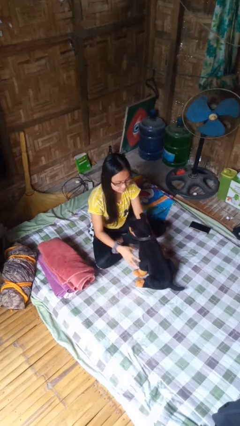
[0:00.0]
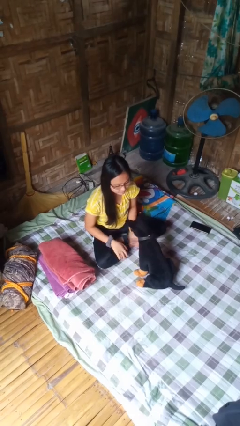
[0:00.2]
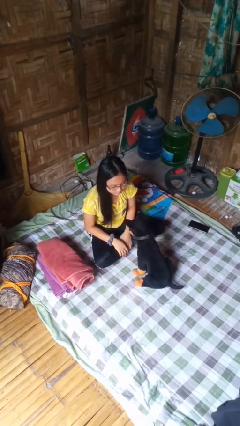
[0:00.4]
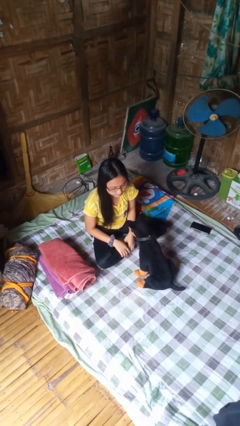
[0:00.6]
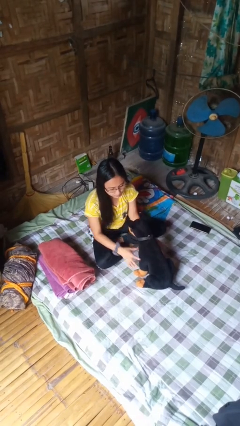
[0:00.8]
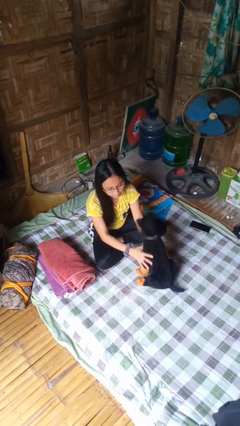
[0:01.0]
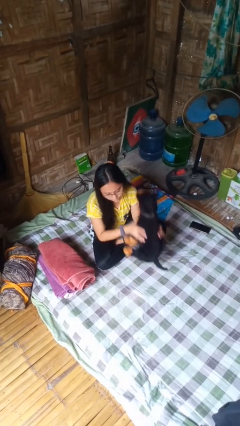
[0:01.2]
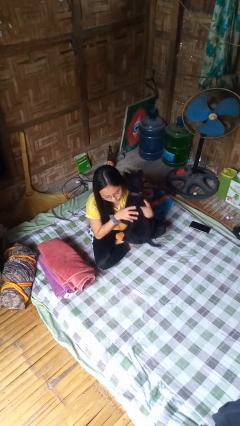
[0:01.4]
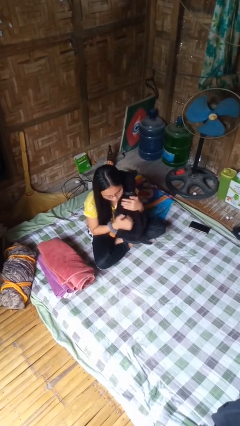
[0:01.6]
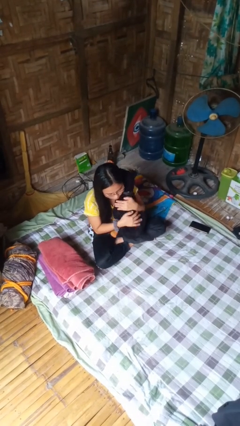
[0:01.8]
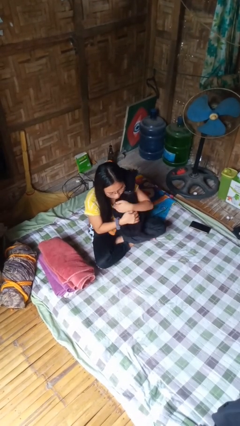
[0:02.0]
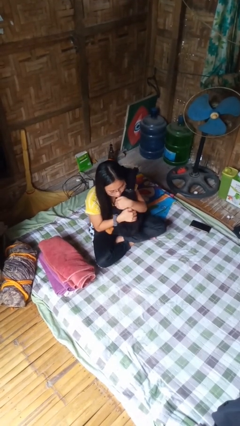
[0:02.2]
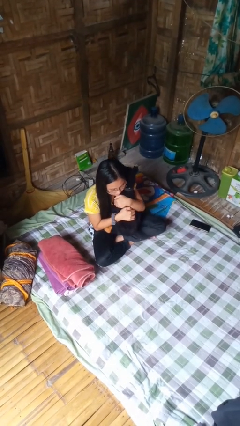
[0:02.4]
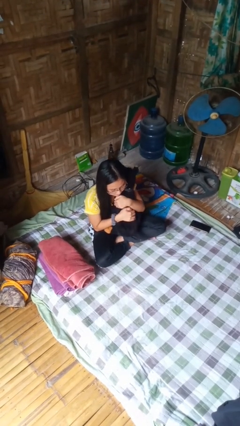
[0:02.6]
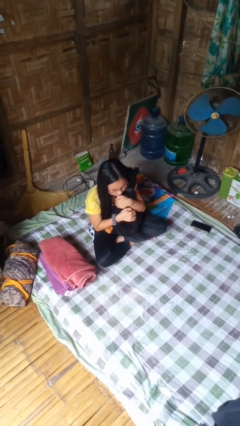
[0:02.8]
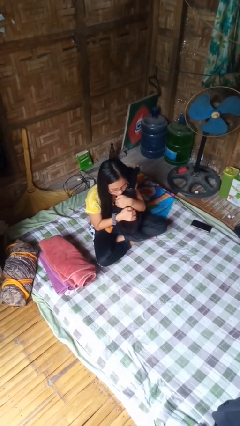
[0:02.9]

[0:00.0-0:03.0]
person hugs stuffed animal

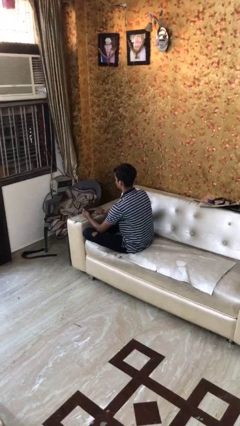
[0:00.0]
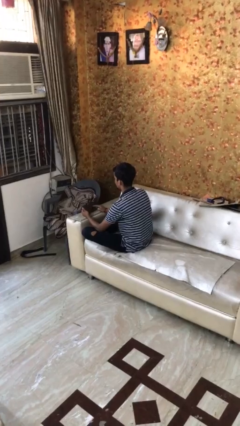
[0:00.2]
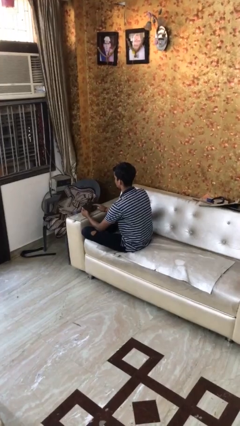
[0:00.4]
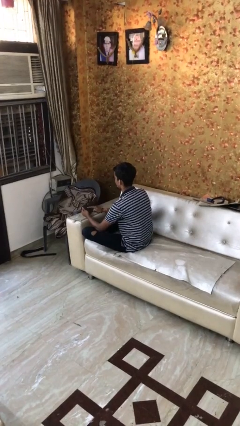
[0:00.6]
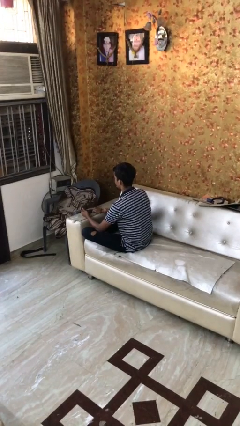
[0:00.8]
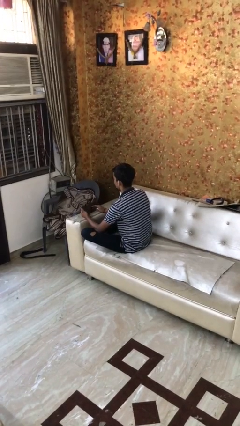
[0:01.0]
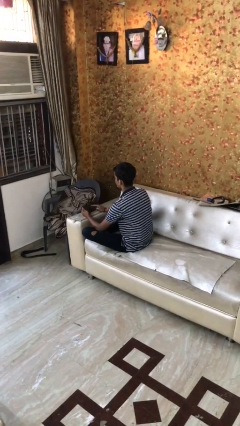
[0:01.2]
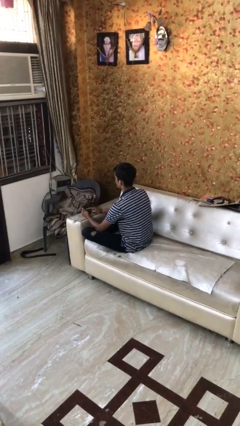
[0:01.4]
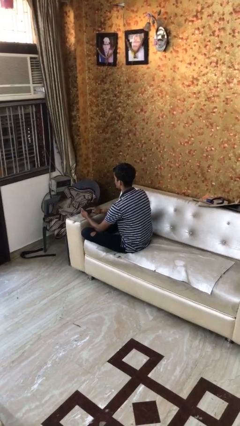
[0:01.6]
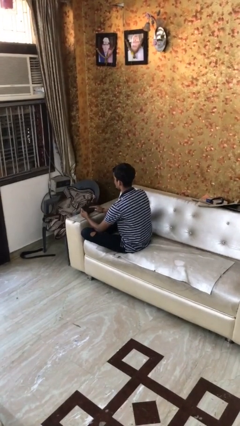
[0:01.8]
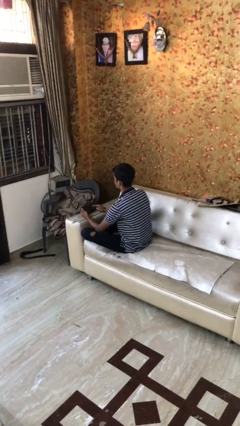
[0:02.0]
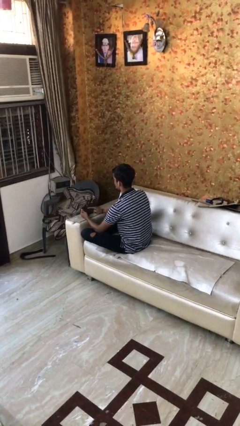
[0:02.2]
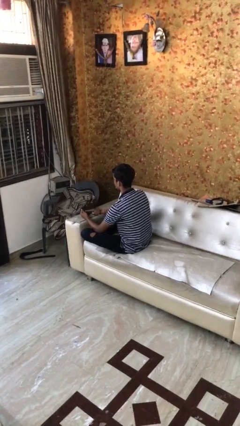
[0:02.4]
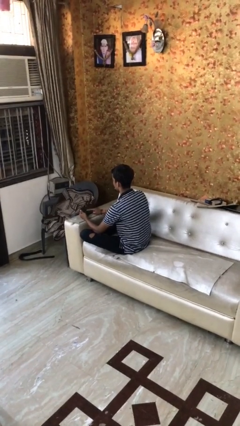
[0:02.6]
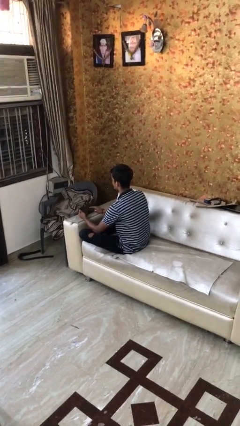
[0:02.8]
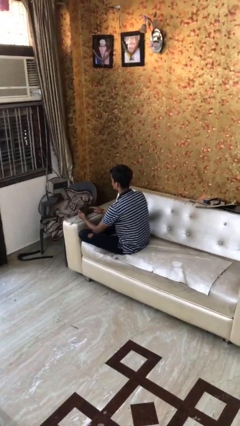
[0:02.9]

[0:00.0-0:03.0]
person interacts with tablet

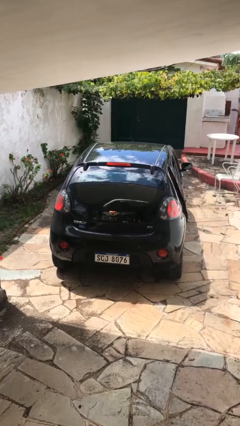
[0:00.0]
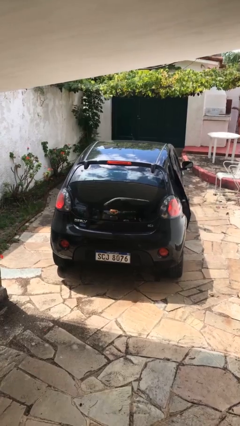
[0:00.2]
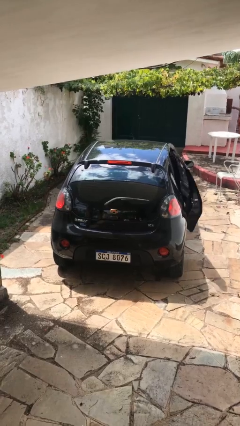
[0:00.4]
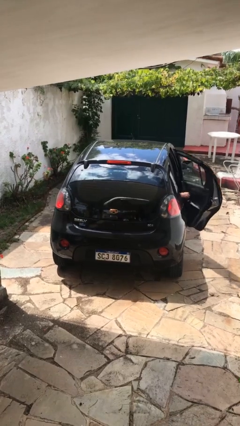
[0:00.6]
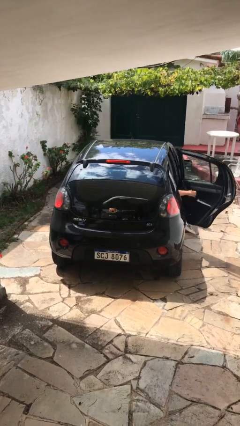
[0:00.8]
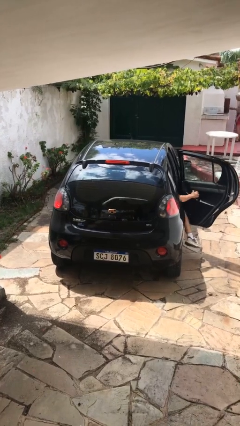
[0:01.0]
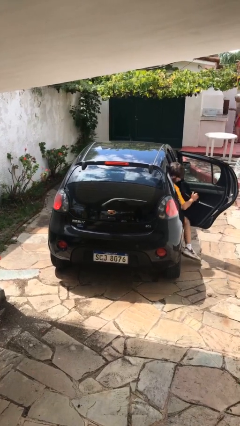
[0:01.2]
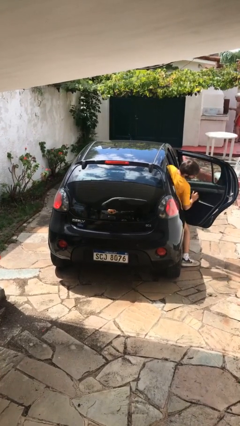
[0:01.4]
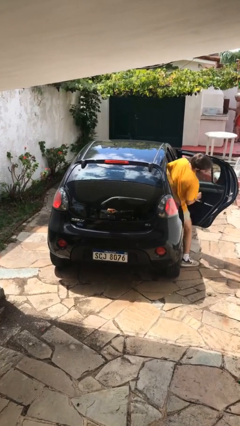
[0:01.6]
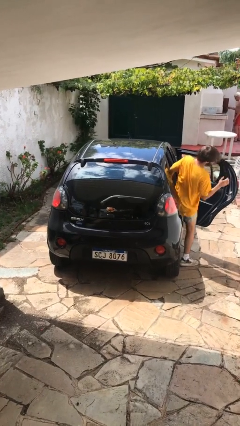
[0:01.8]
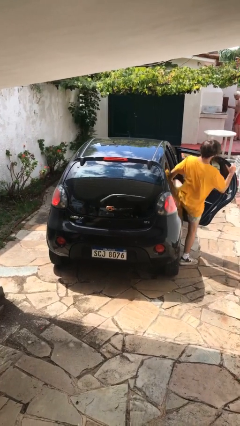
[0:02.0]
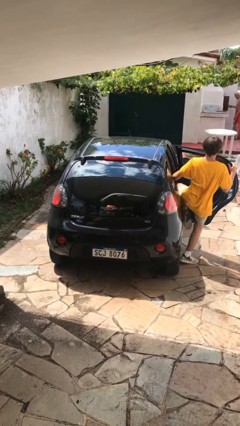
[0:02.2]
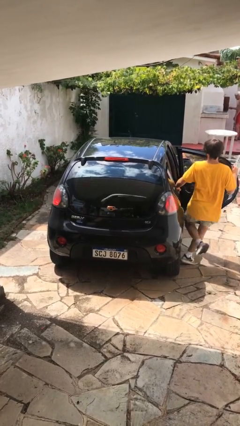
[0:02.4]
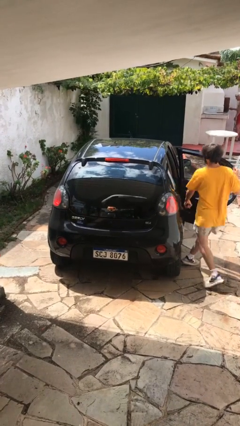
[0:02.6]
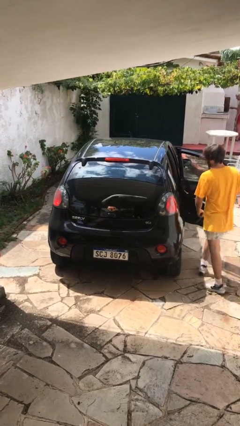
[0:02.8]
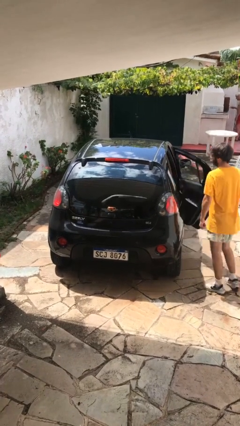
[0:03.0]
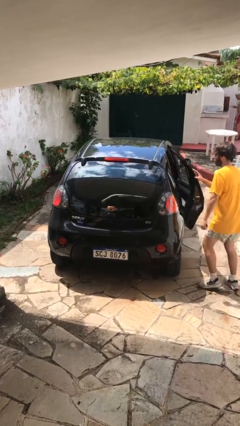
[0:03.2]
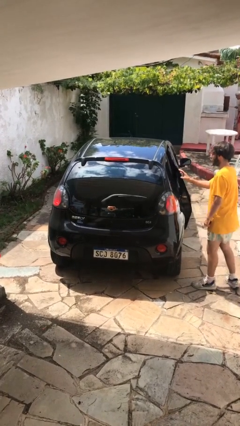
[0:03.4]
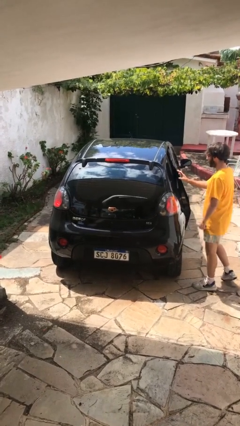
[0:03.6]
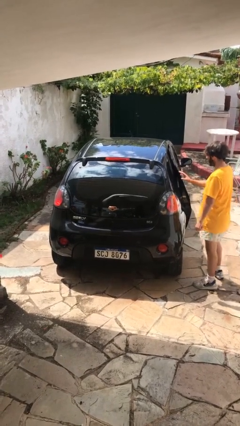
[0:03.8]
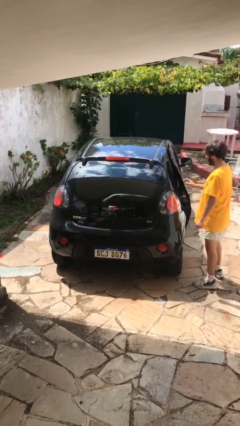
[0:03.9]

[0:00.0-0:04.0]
car drops off person

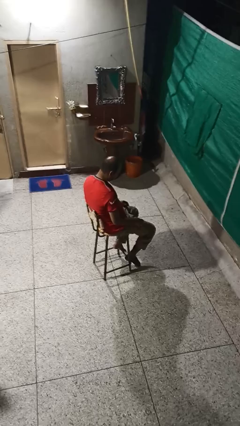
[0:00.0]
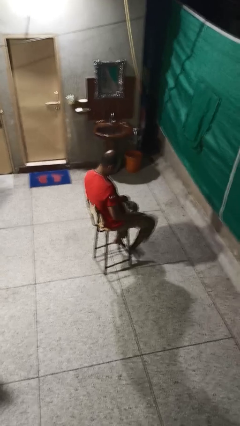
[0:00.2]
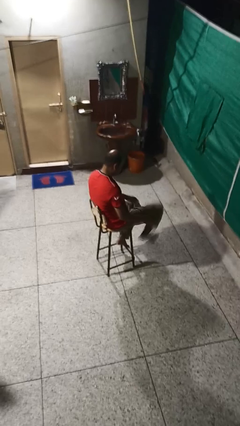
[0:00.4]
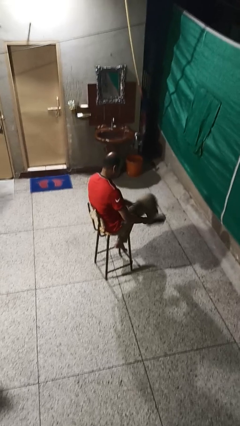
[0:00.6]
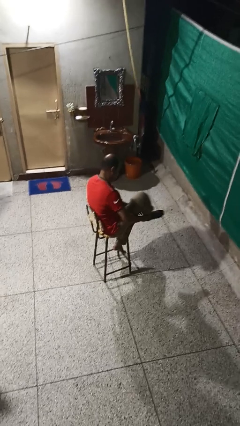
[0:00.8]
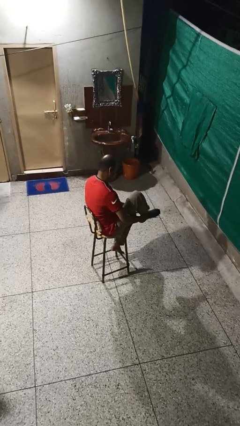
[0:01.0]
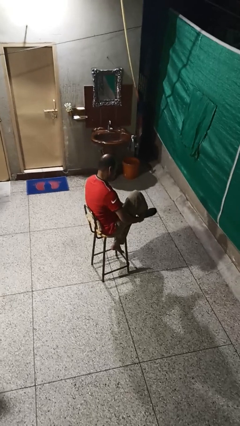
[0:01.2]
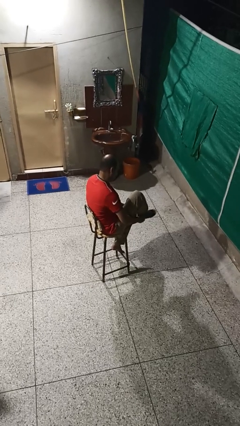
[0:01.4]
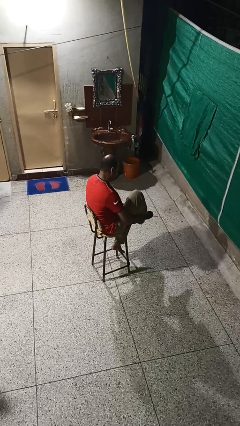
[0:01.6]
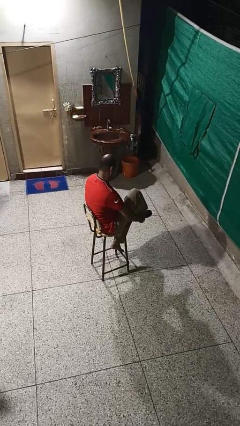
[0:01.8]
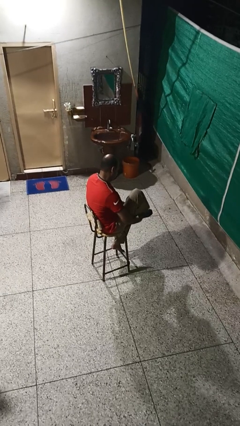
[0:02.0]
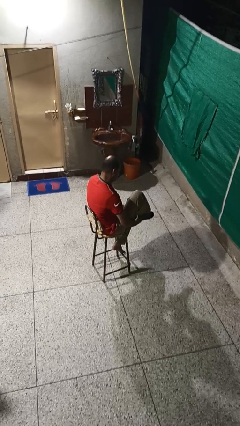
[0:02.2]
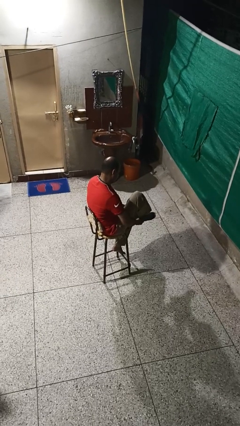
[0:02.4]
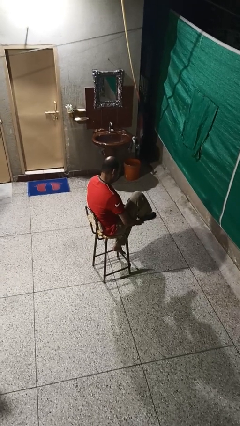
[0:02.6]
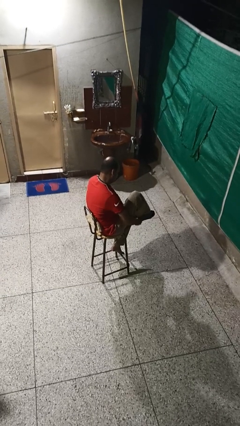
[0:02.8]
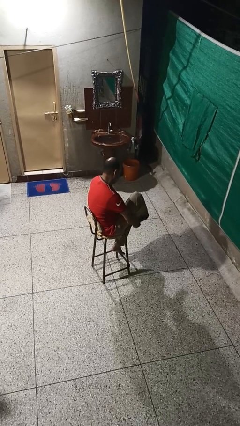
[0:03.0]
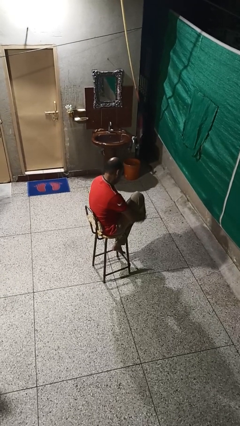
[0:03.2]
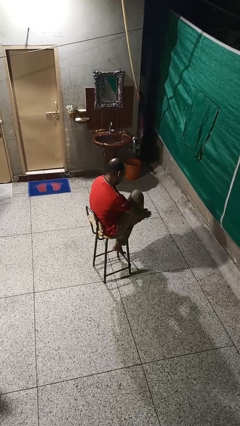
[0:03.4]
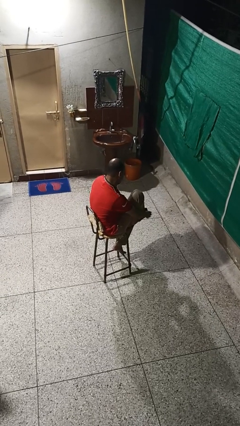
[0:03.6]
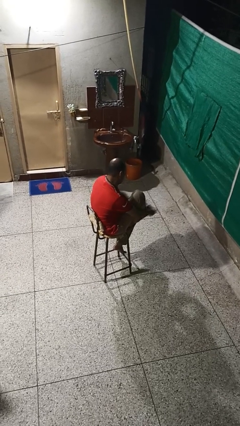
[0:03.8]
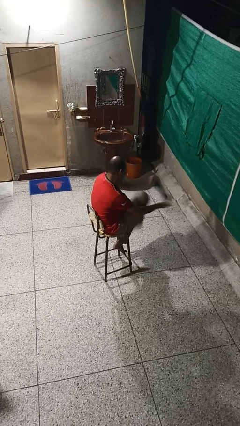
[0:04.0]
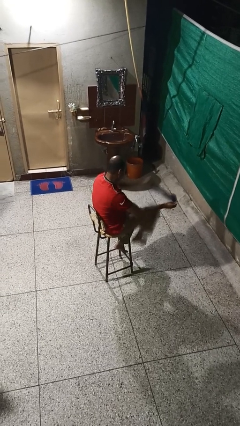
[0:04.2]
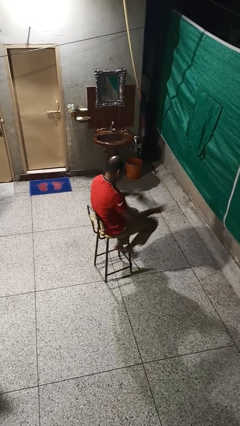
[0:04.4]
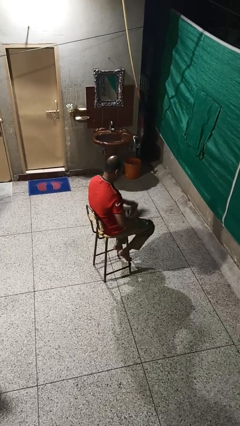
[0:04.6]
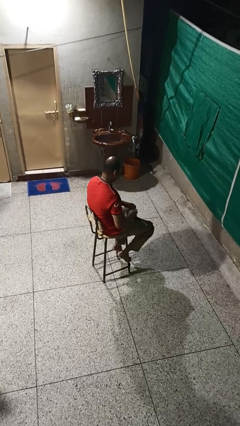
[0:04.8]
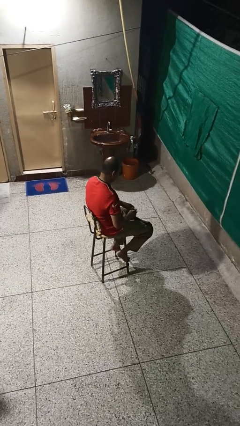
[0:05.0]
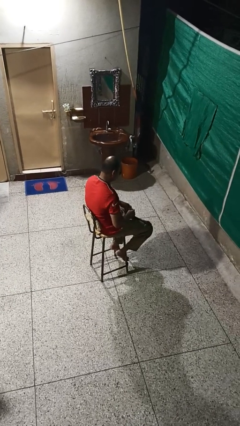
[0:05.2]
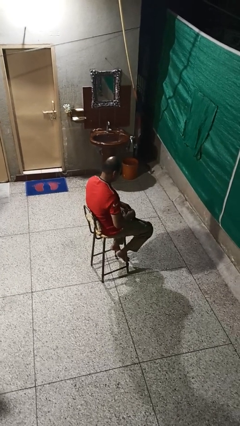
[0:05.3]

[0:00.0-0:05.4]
person takes off socks

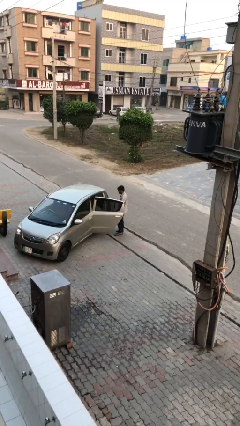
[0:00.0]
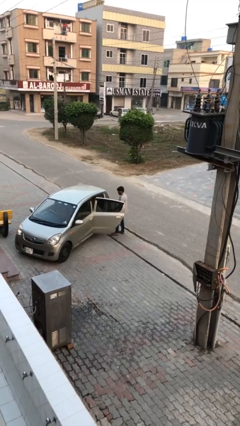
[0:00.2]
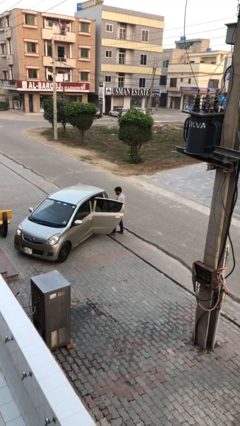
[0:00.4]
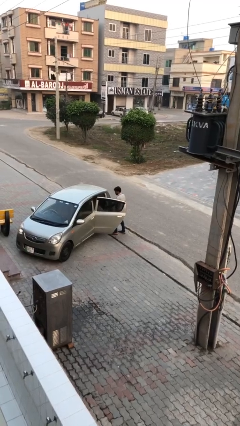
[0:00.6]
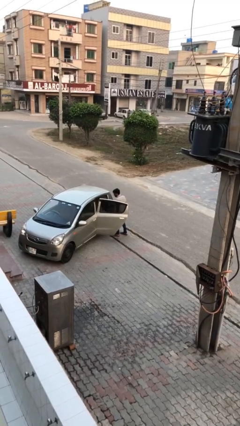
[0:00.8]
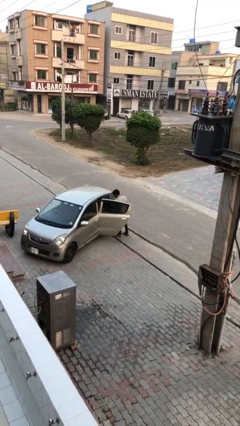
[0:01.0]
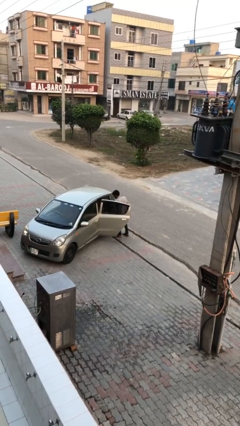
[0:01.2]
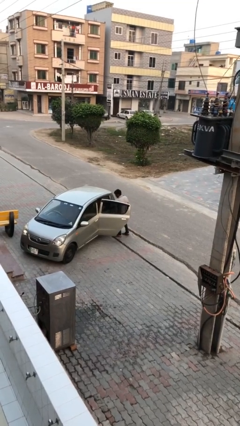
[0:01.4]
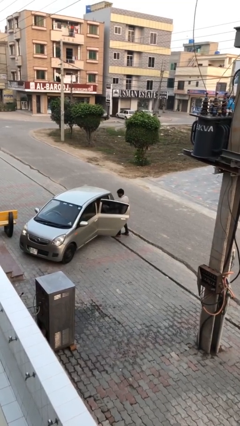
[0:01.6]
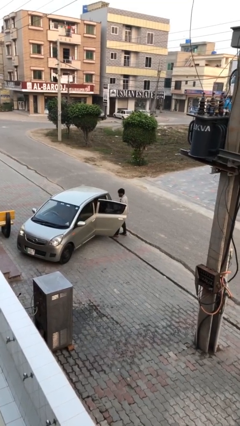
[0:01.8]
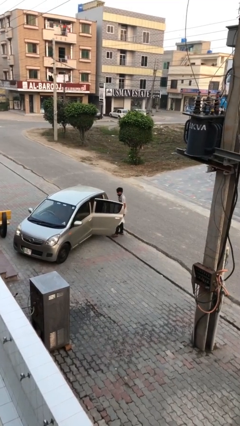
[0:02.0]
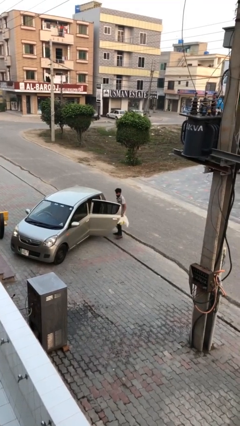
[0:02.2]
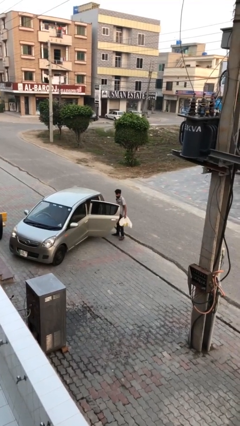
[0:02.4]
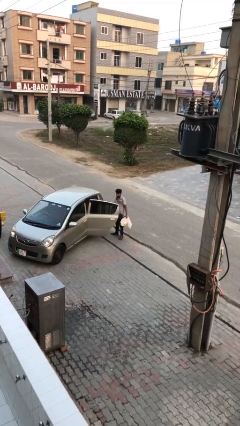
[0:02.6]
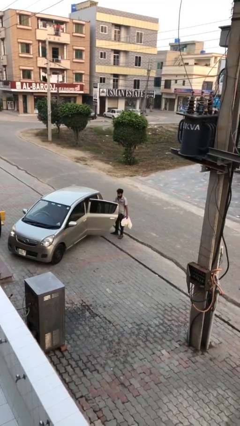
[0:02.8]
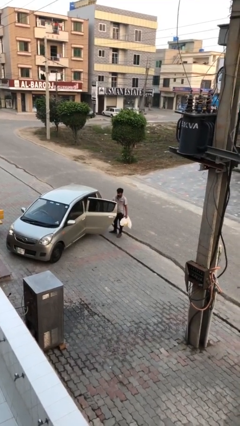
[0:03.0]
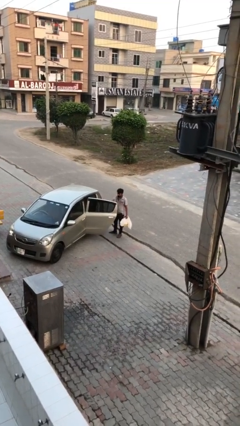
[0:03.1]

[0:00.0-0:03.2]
person unloads car
